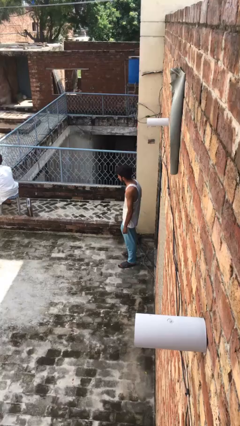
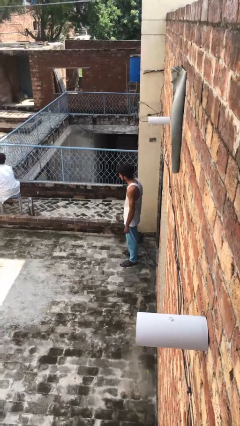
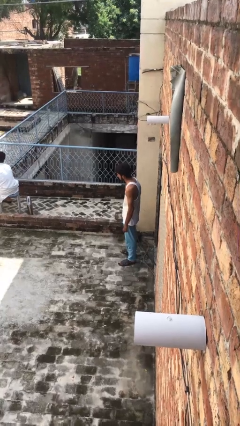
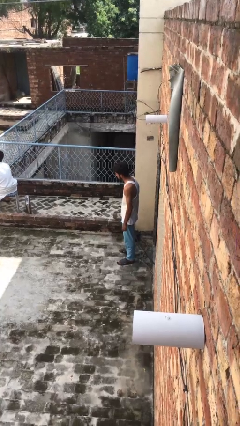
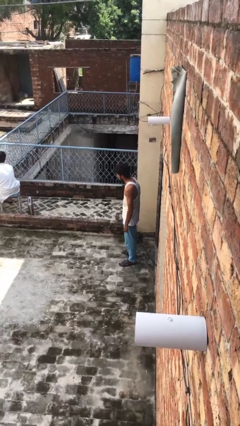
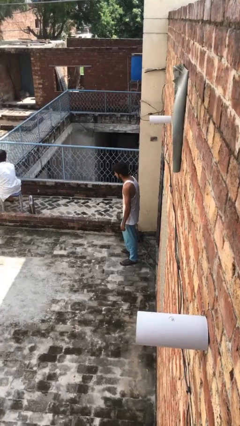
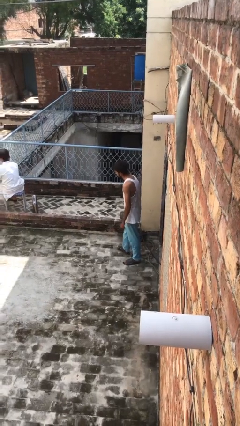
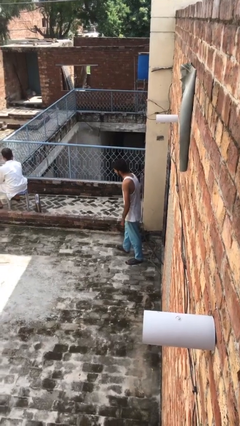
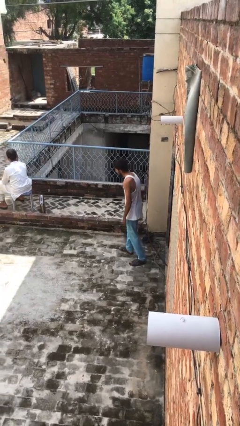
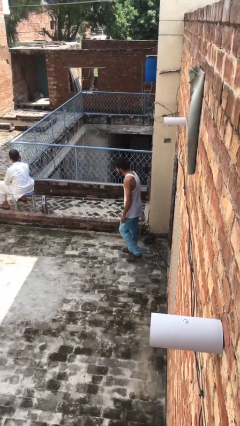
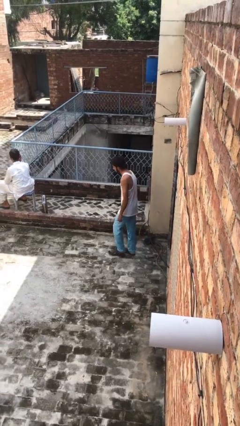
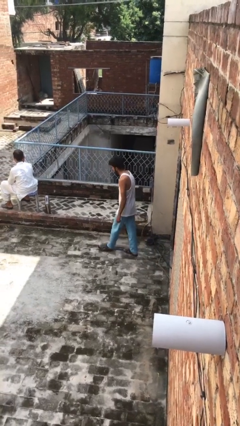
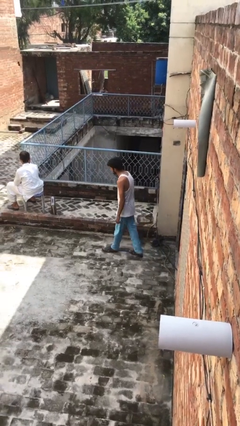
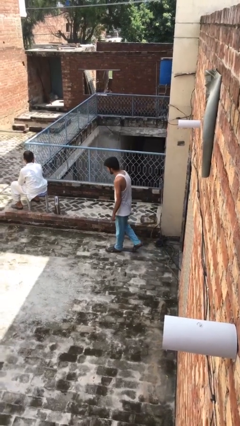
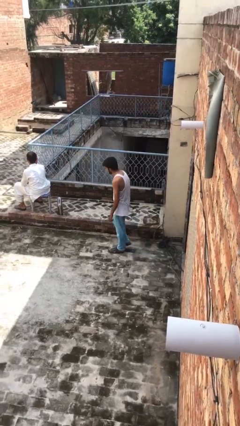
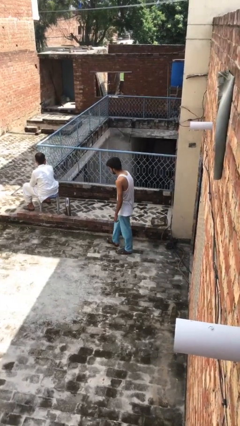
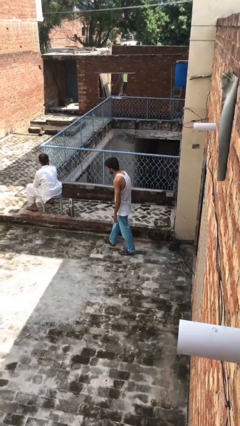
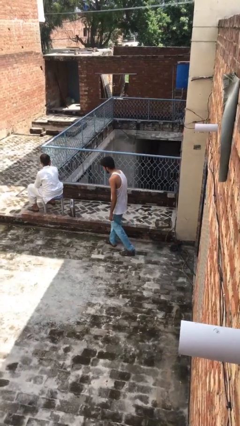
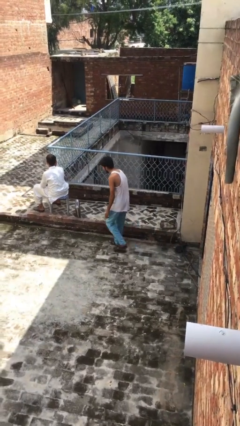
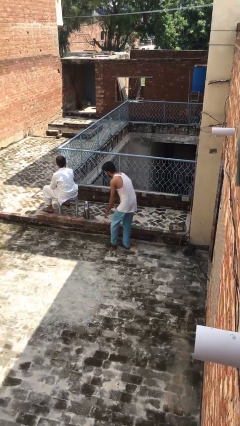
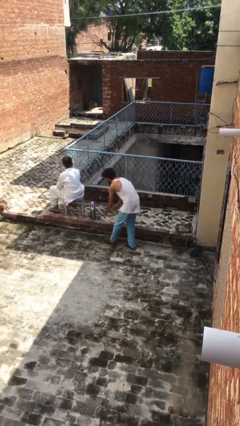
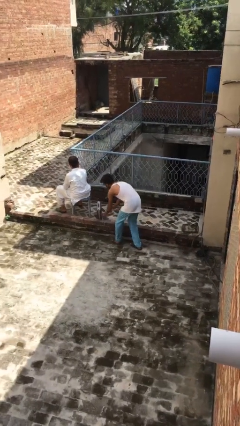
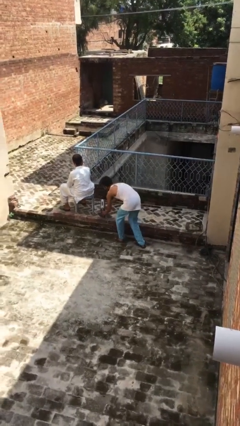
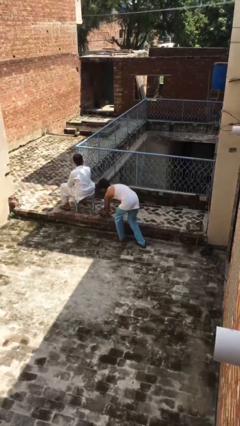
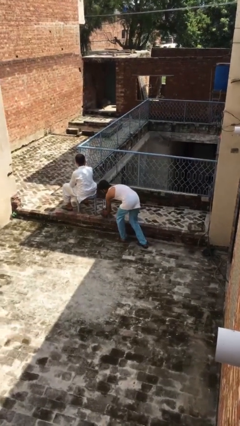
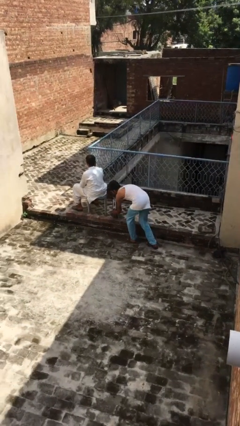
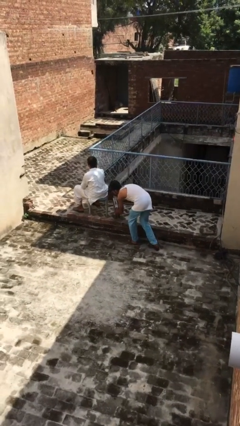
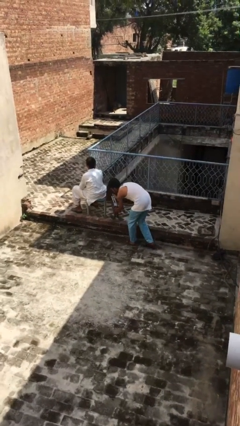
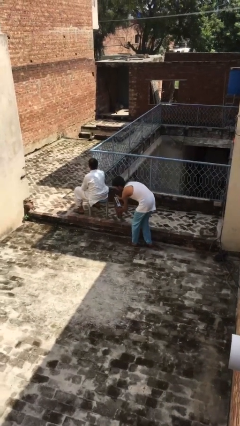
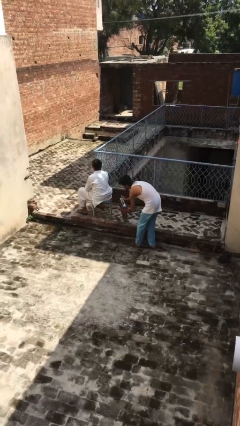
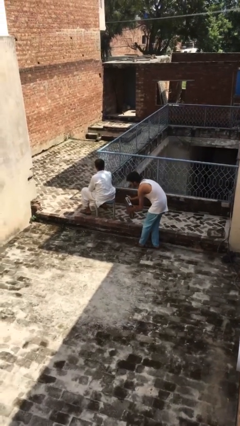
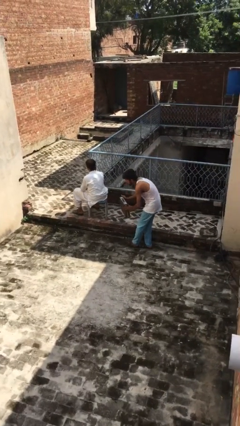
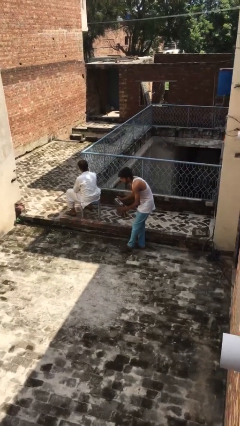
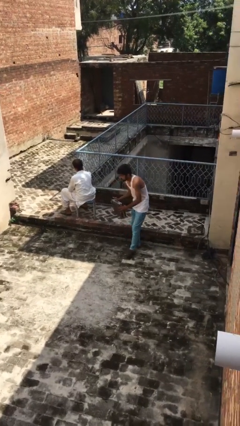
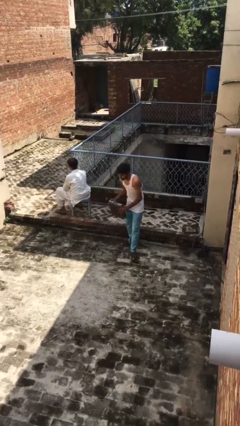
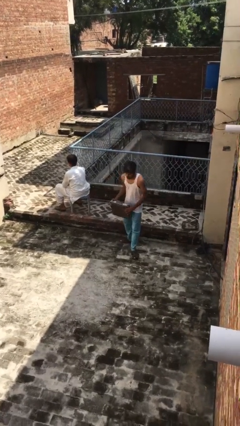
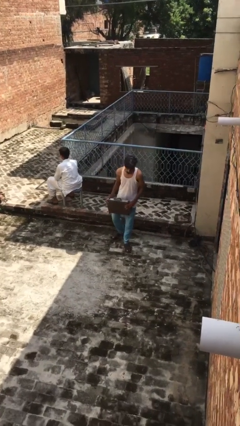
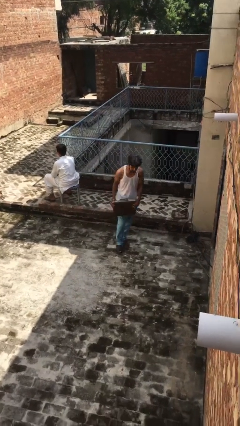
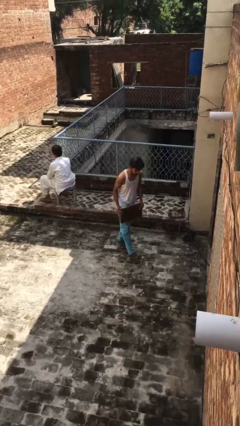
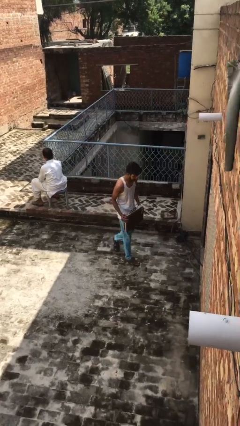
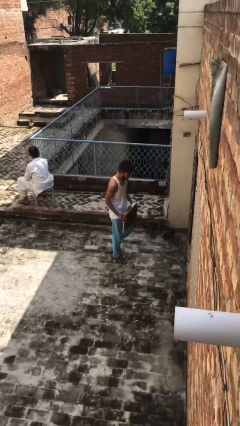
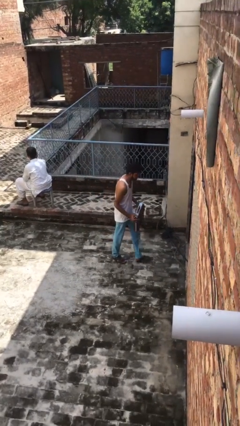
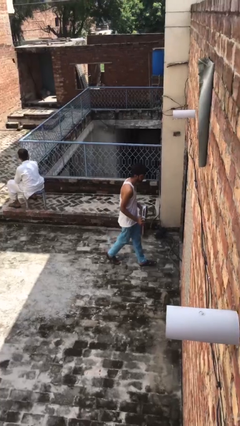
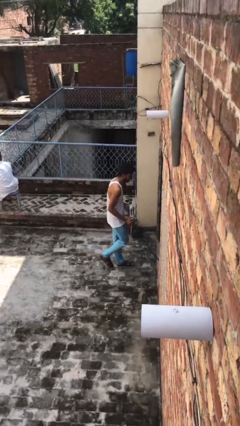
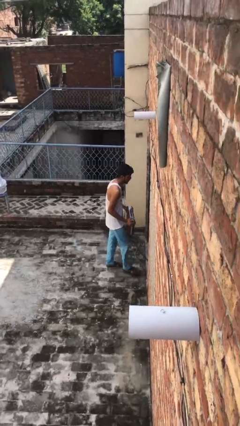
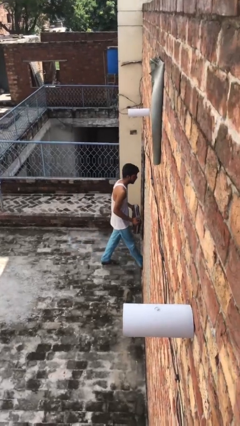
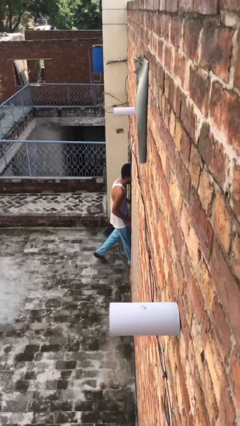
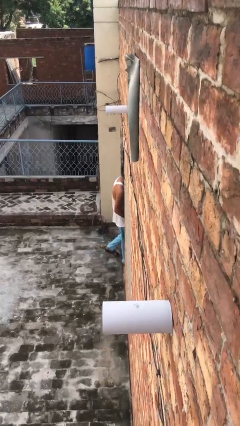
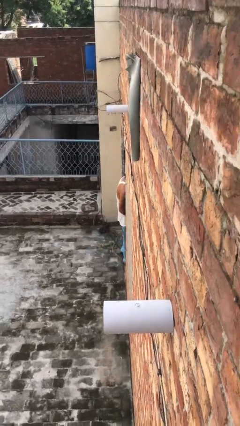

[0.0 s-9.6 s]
person steals object from person

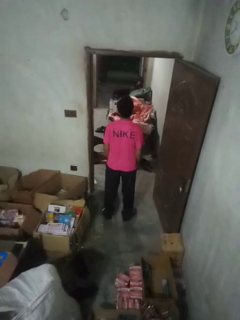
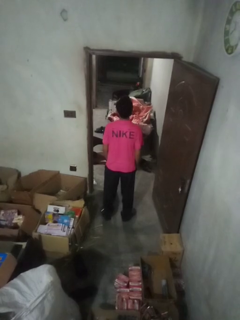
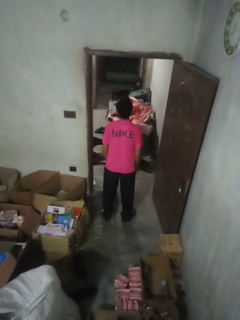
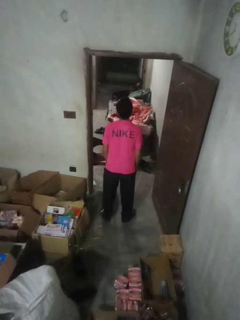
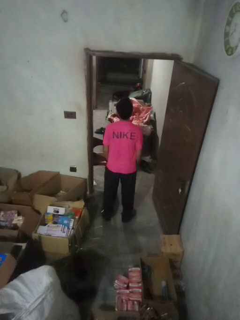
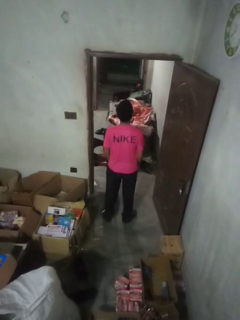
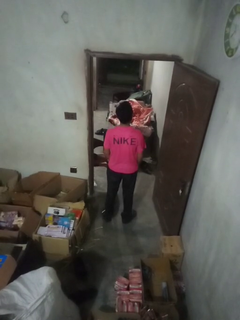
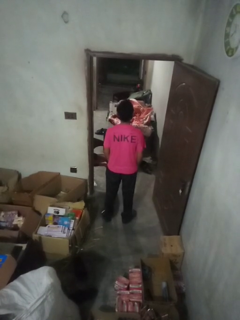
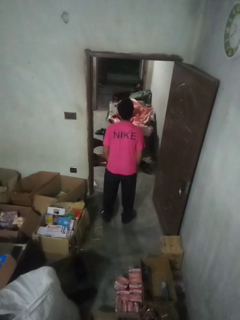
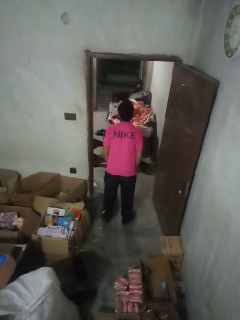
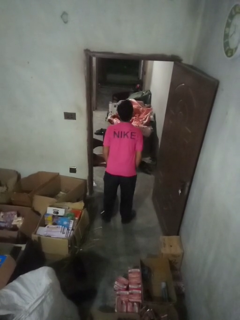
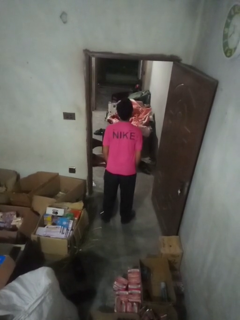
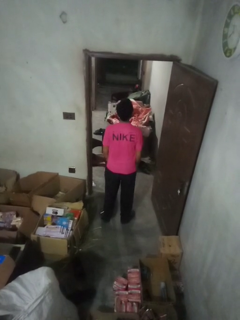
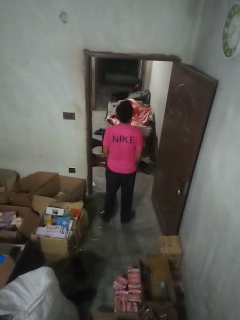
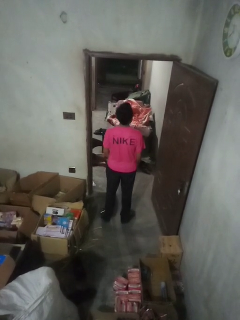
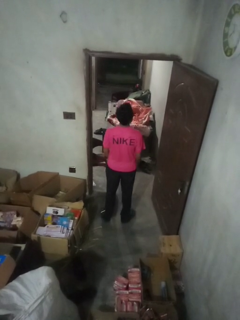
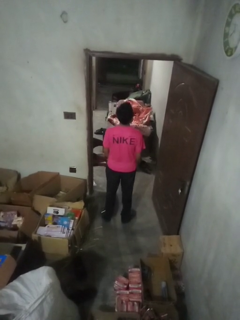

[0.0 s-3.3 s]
person wiggles hips

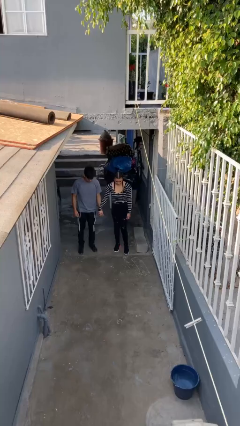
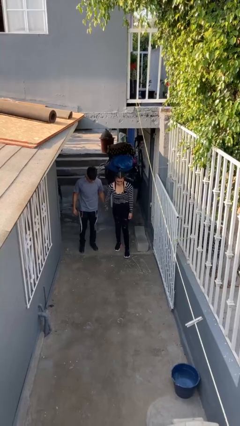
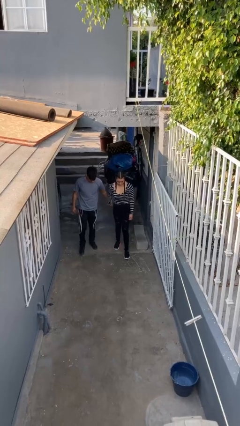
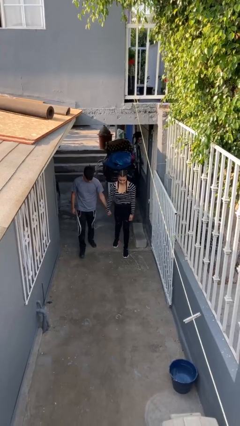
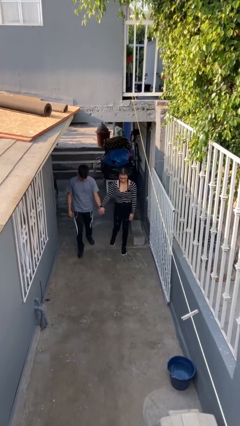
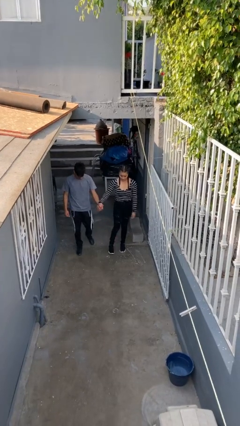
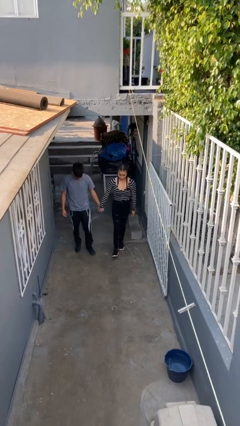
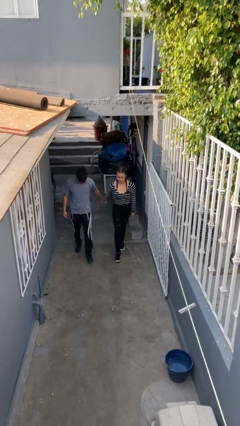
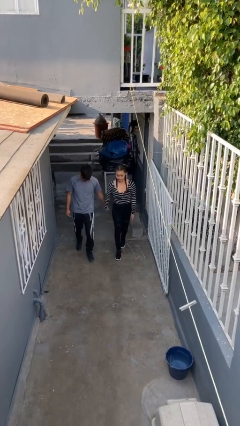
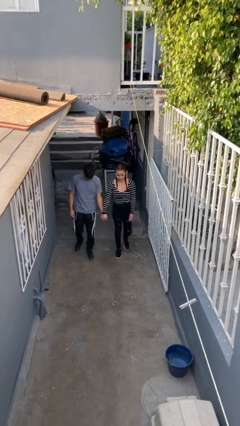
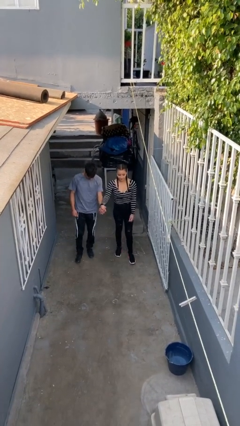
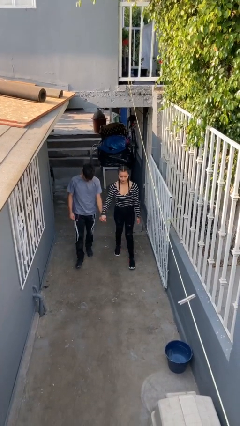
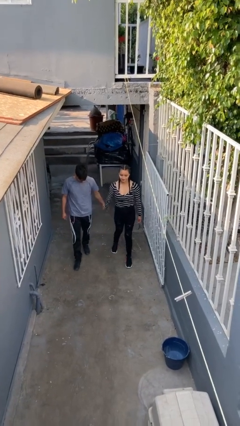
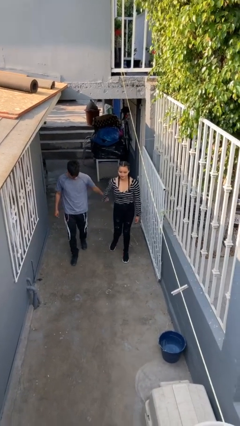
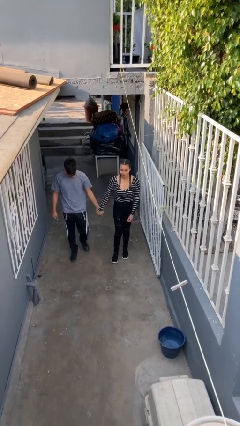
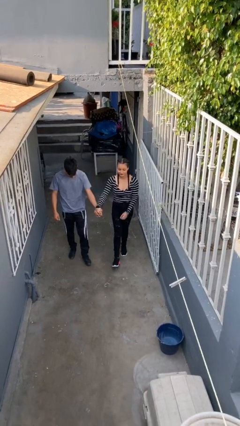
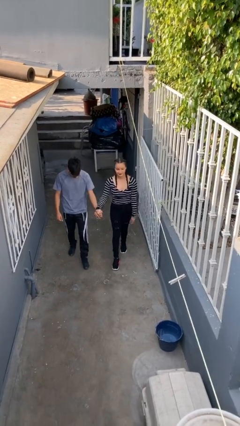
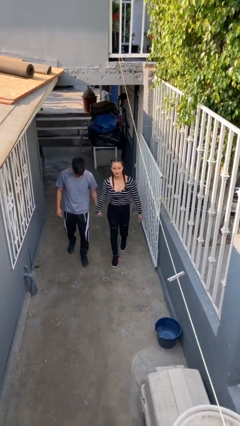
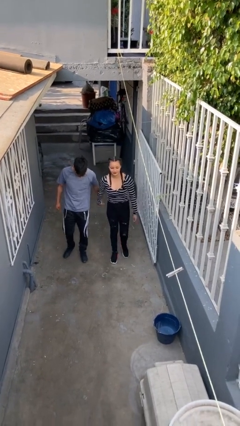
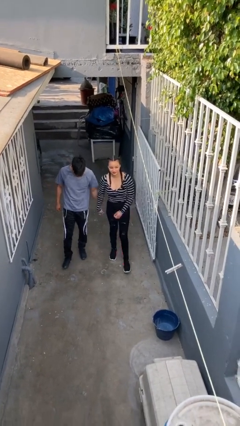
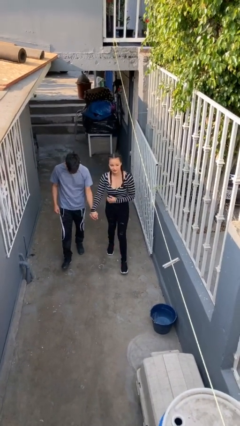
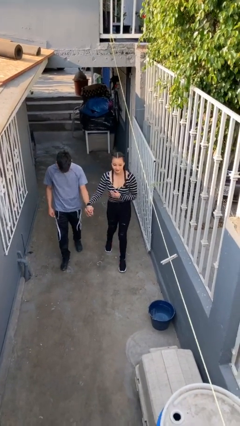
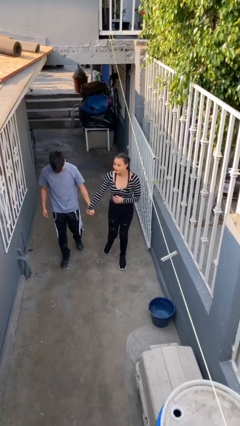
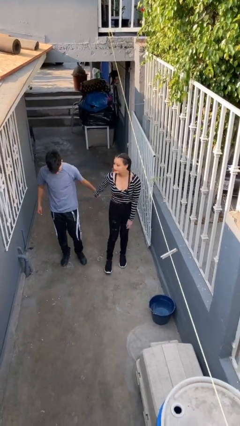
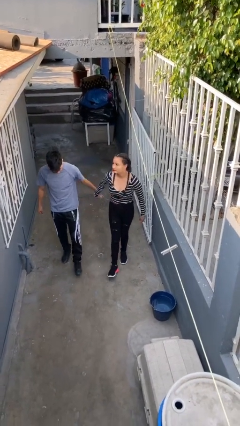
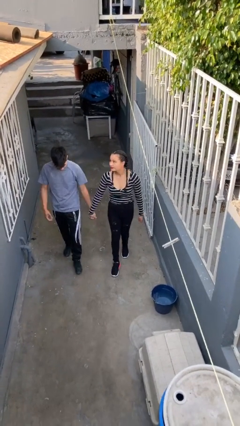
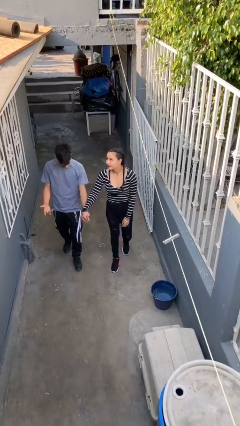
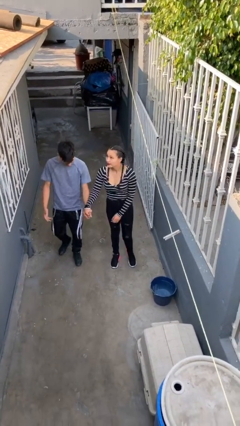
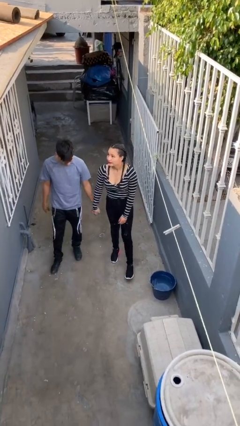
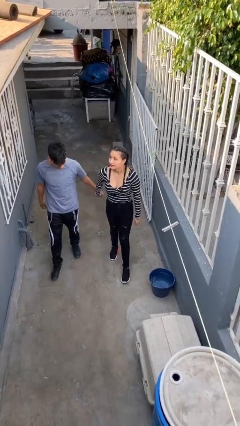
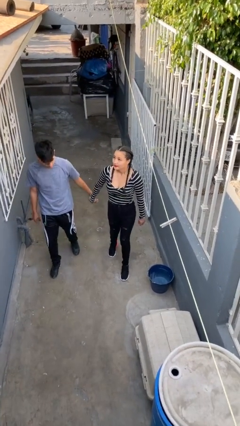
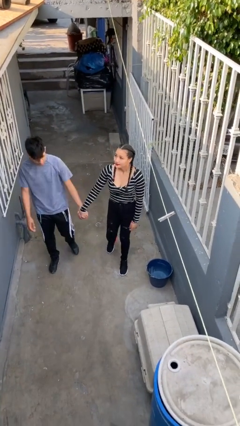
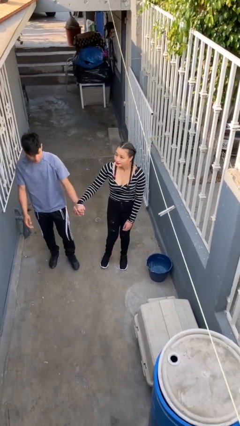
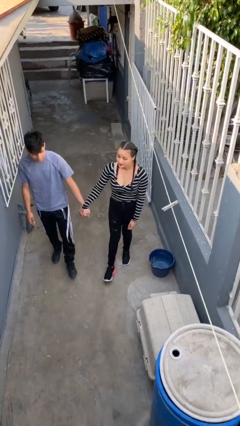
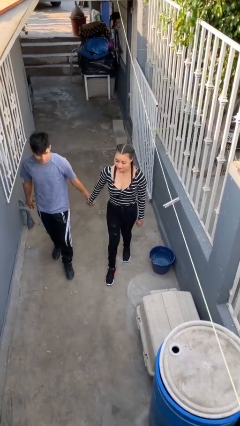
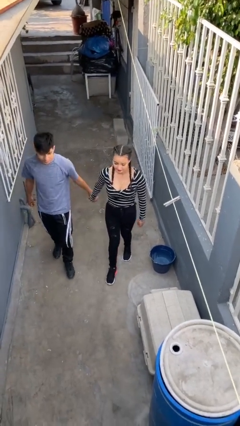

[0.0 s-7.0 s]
person holds hand
